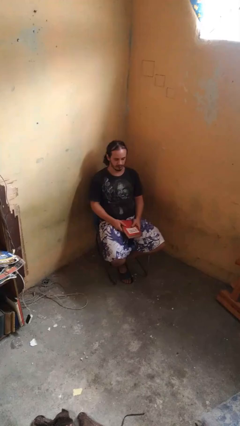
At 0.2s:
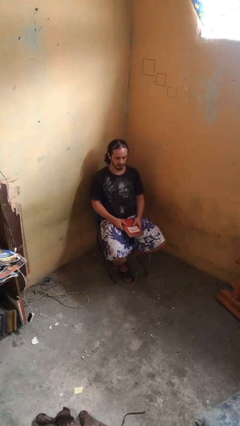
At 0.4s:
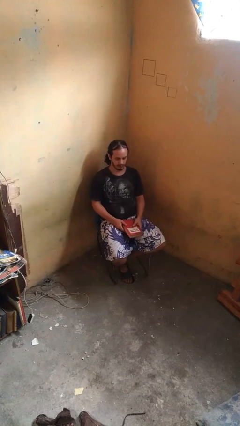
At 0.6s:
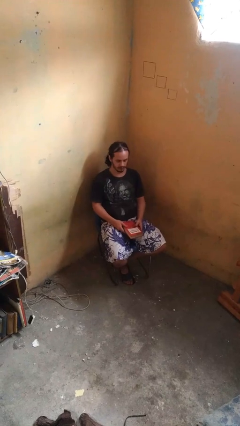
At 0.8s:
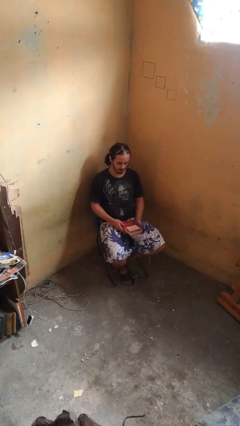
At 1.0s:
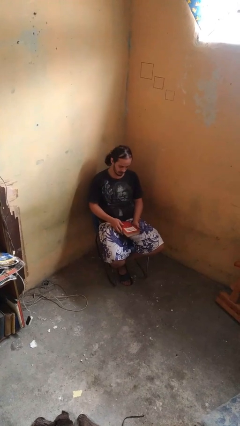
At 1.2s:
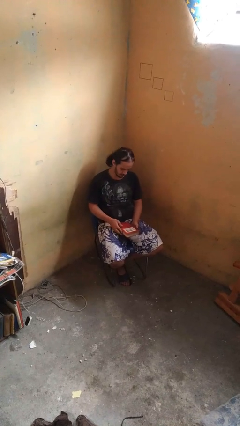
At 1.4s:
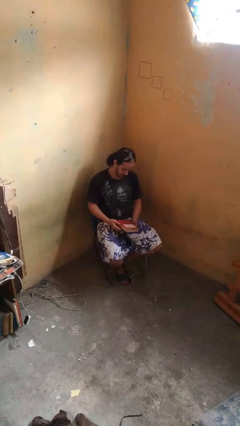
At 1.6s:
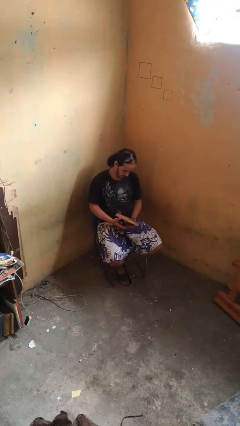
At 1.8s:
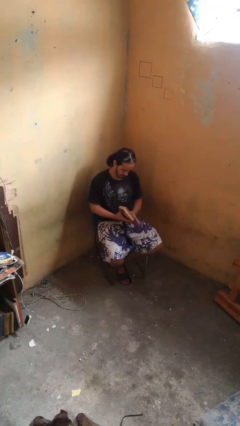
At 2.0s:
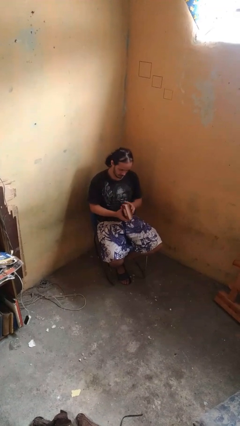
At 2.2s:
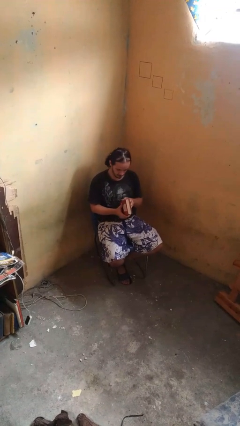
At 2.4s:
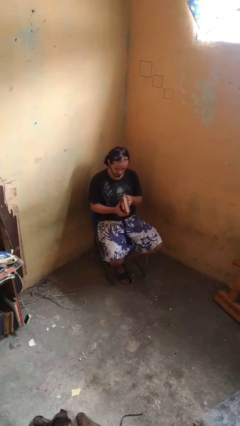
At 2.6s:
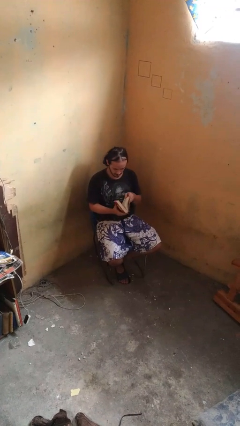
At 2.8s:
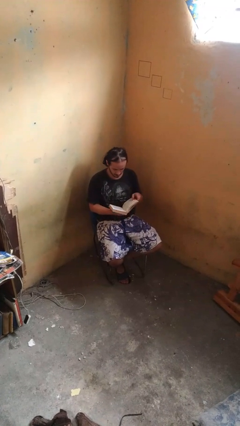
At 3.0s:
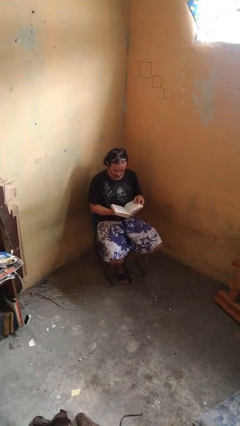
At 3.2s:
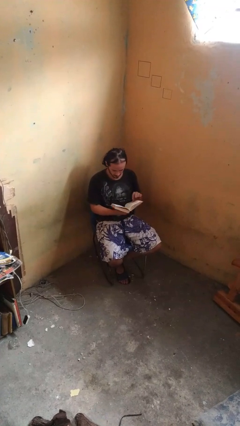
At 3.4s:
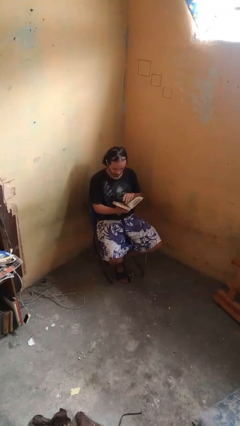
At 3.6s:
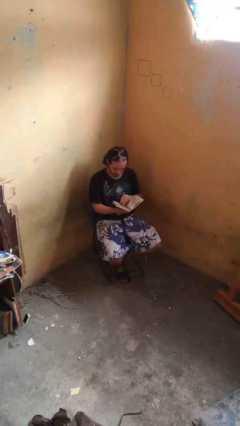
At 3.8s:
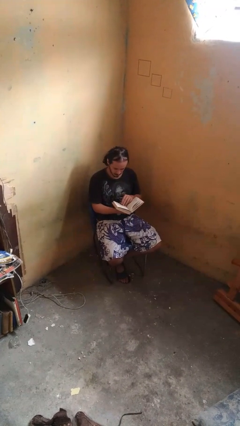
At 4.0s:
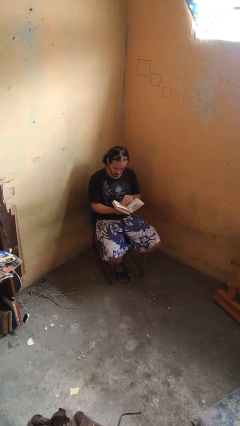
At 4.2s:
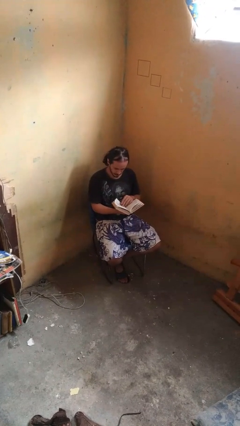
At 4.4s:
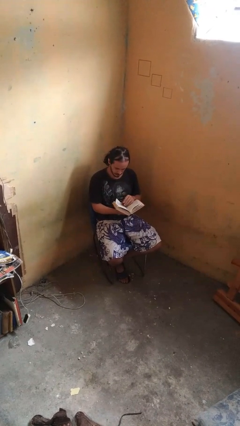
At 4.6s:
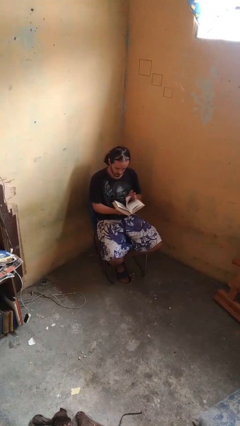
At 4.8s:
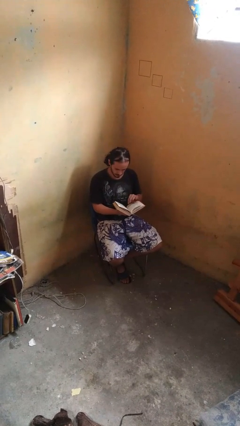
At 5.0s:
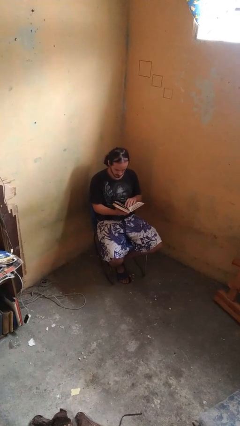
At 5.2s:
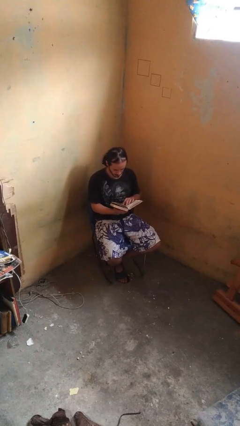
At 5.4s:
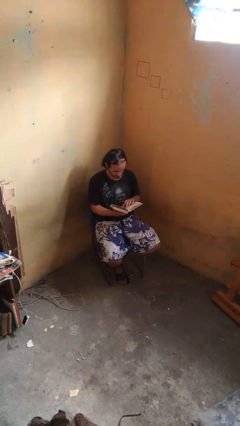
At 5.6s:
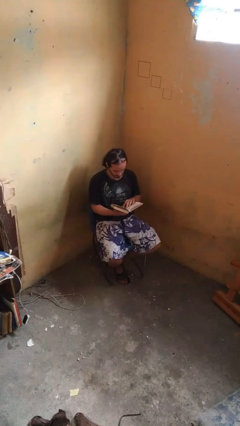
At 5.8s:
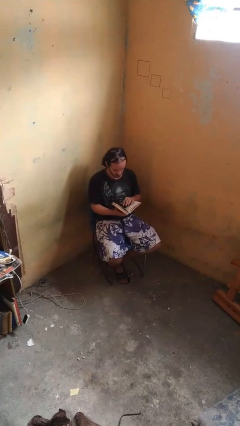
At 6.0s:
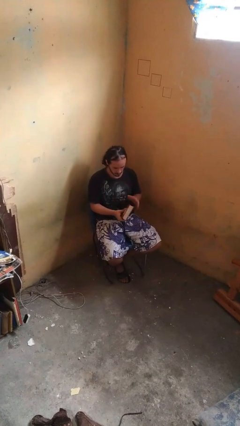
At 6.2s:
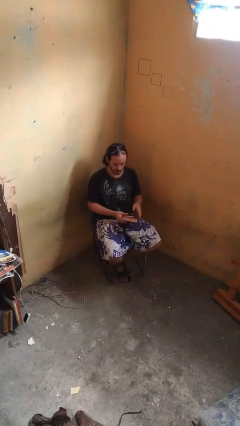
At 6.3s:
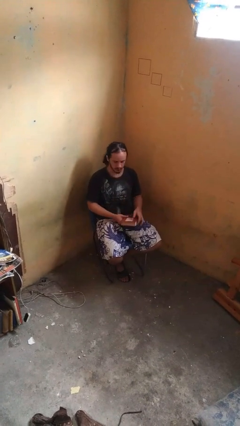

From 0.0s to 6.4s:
person reads book

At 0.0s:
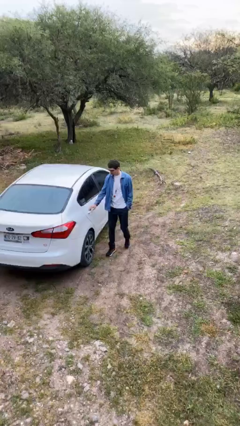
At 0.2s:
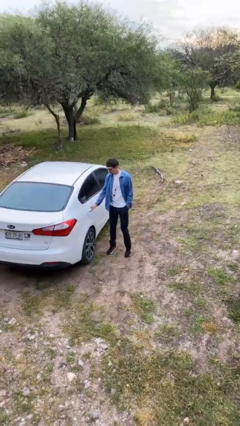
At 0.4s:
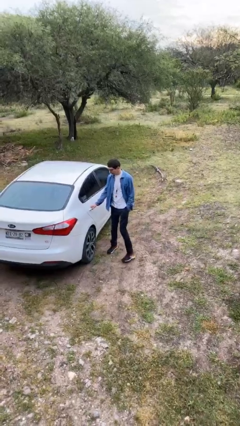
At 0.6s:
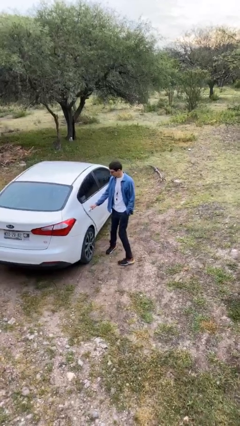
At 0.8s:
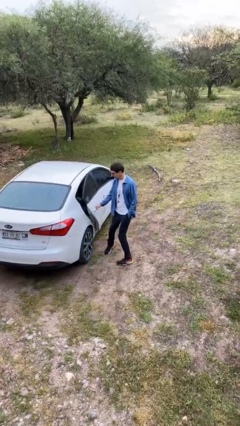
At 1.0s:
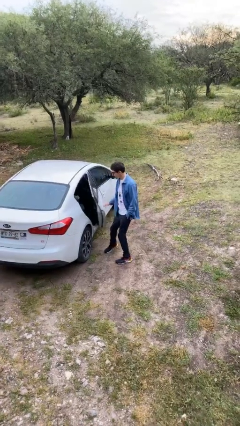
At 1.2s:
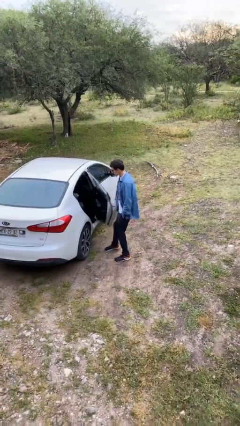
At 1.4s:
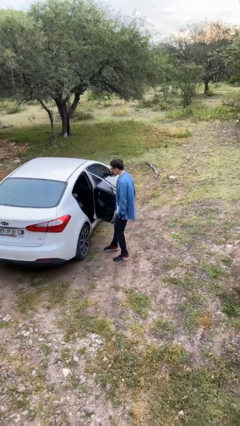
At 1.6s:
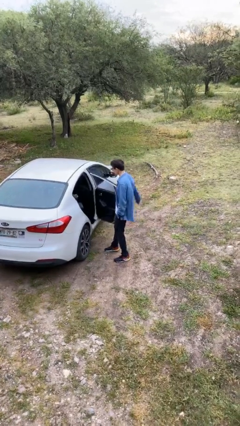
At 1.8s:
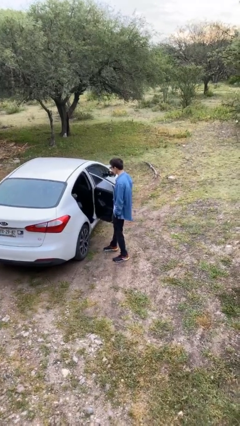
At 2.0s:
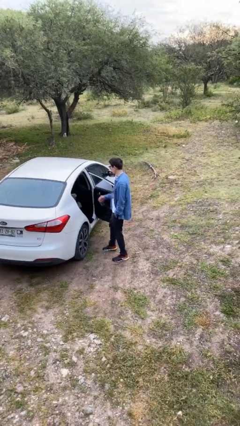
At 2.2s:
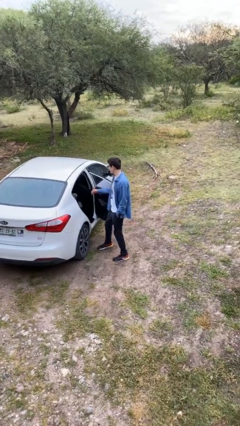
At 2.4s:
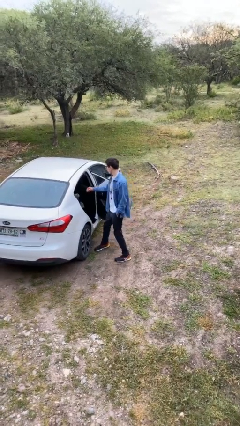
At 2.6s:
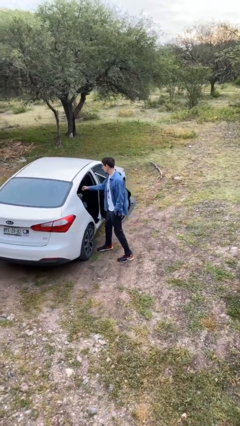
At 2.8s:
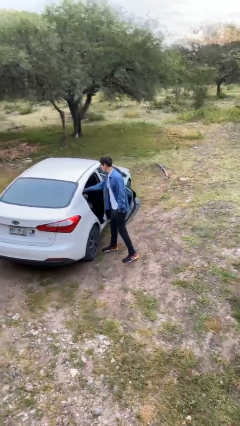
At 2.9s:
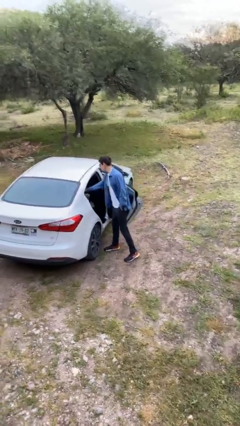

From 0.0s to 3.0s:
person opens car door

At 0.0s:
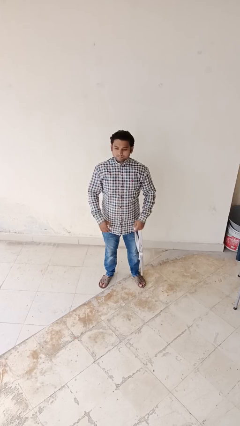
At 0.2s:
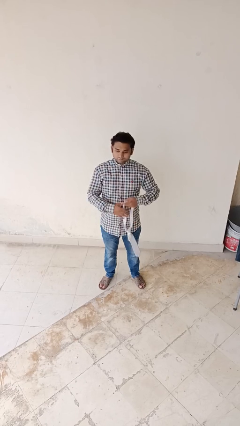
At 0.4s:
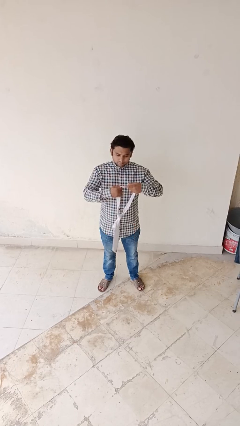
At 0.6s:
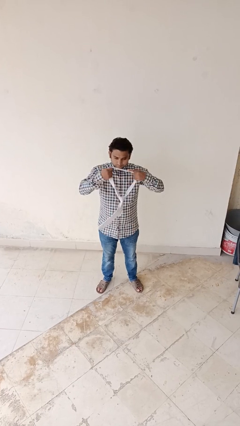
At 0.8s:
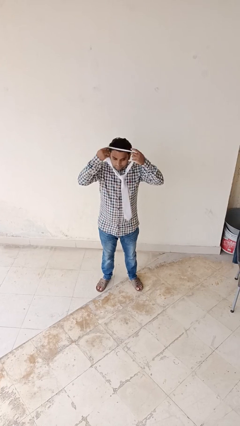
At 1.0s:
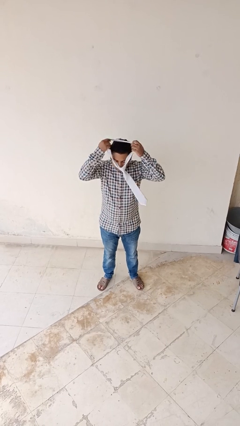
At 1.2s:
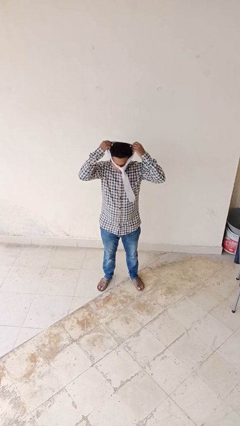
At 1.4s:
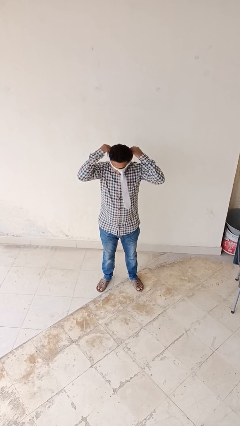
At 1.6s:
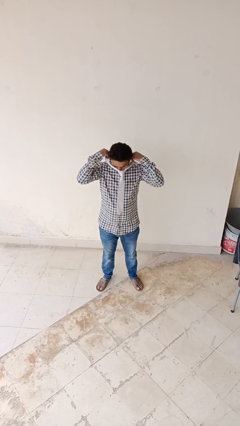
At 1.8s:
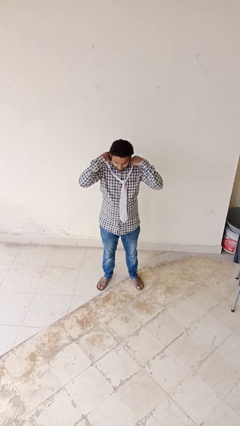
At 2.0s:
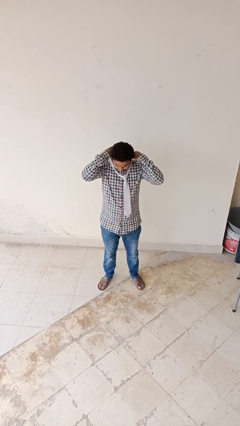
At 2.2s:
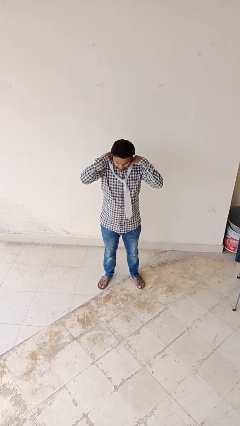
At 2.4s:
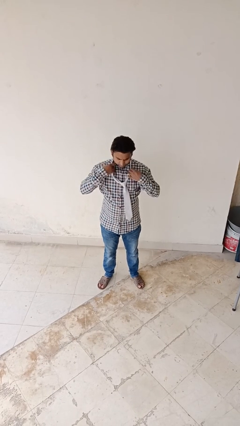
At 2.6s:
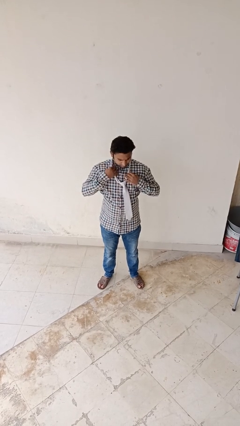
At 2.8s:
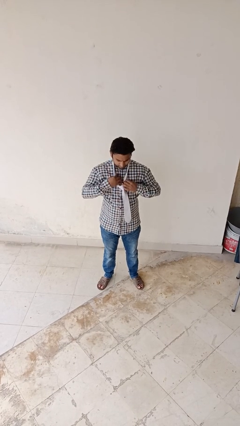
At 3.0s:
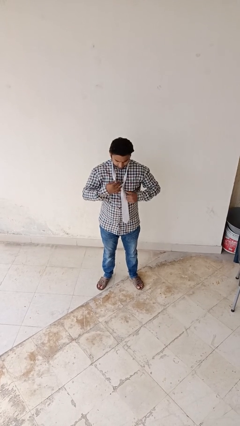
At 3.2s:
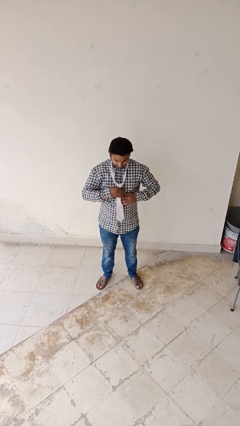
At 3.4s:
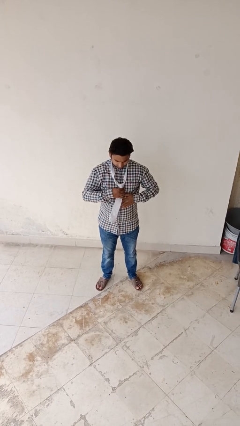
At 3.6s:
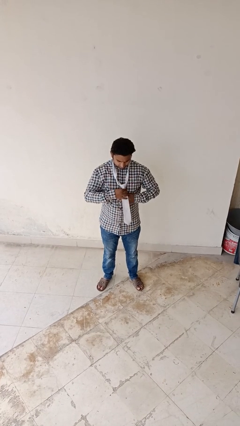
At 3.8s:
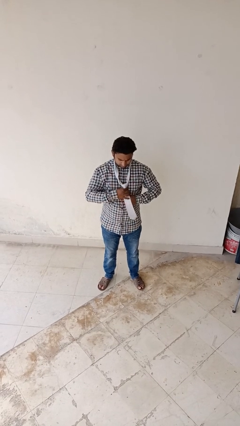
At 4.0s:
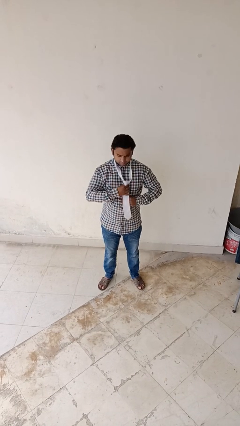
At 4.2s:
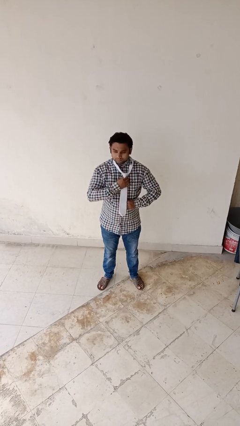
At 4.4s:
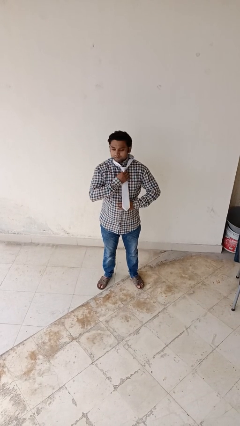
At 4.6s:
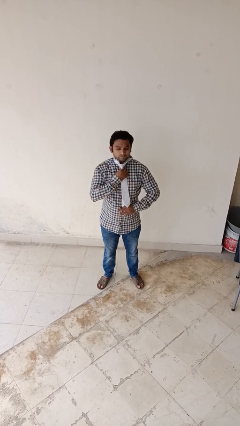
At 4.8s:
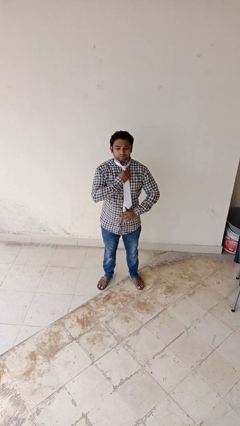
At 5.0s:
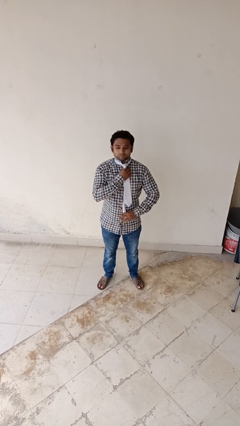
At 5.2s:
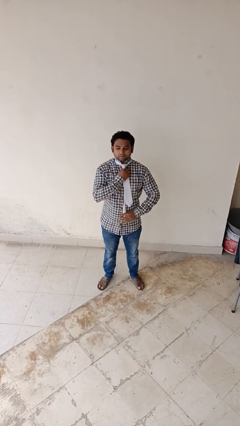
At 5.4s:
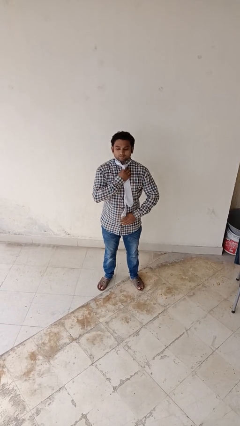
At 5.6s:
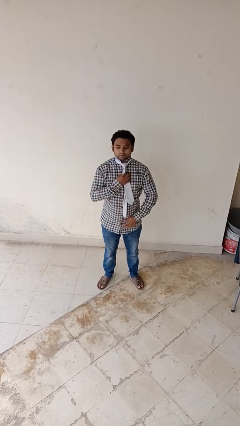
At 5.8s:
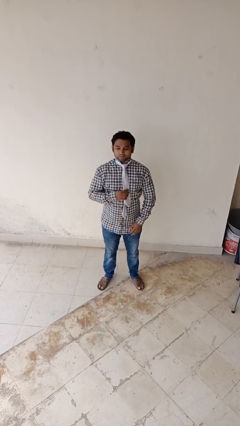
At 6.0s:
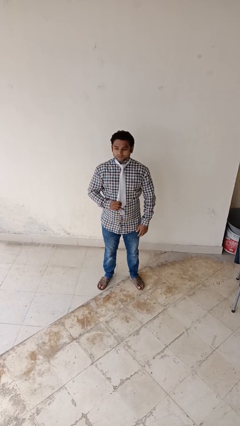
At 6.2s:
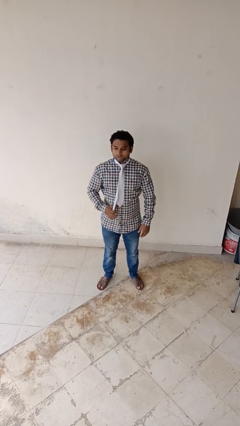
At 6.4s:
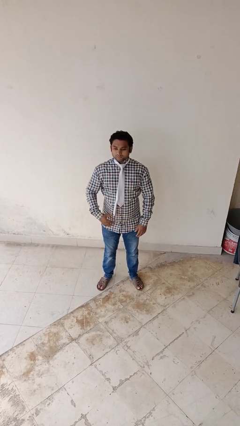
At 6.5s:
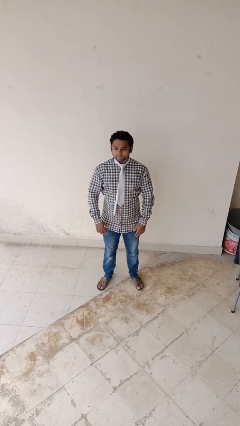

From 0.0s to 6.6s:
person puts on necktie

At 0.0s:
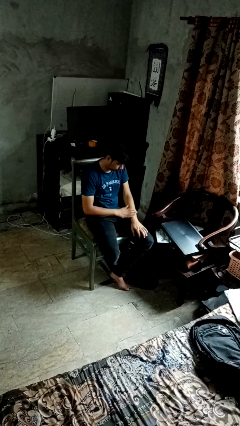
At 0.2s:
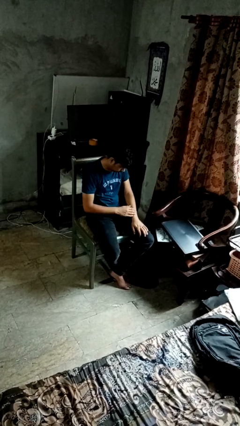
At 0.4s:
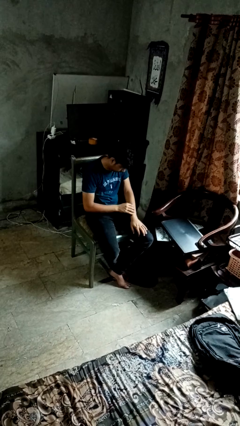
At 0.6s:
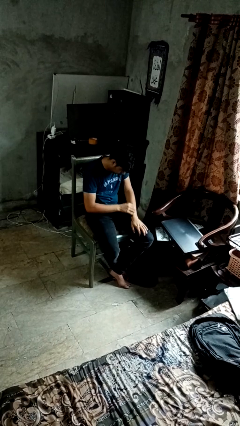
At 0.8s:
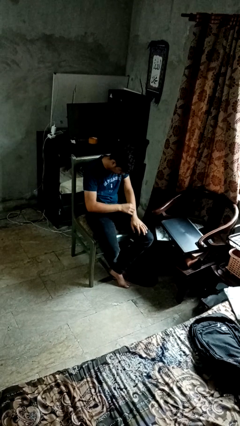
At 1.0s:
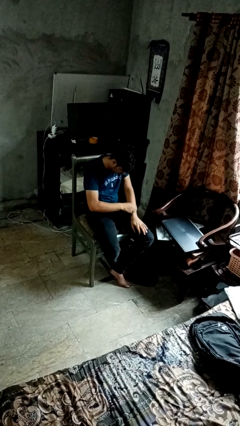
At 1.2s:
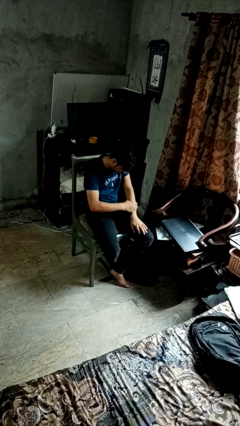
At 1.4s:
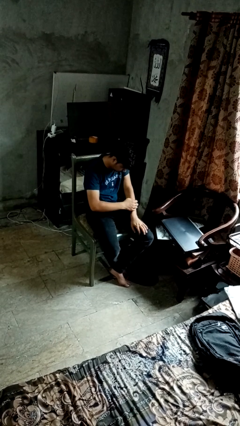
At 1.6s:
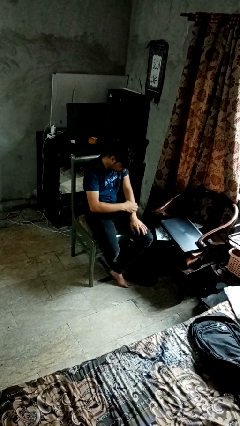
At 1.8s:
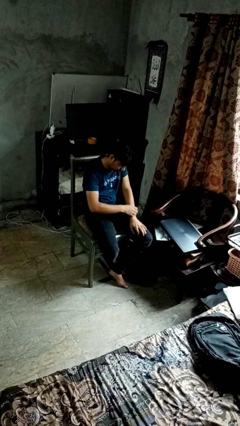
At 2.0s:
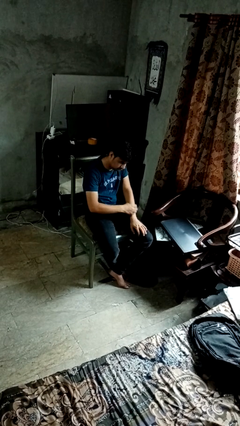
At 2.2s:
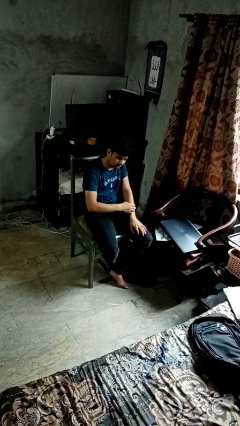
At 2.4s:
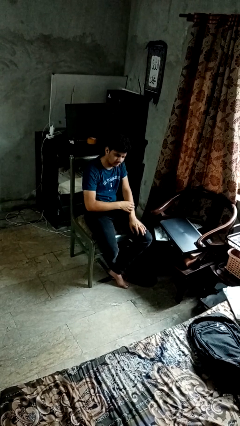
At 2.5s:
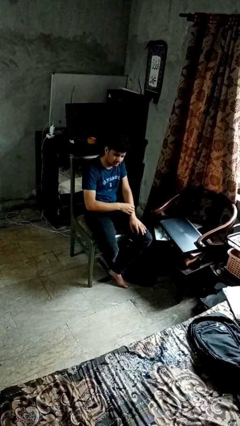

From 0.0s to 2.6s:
person swats bug
